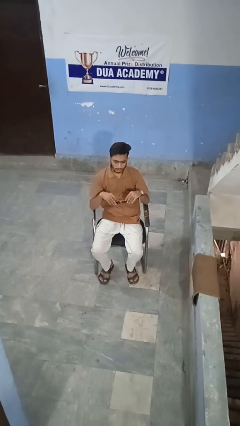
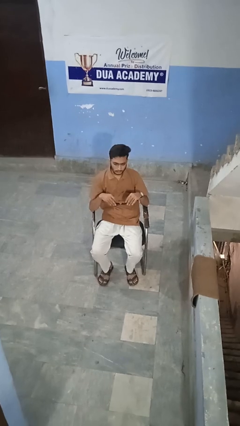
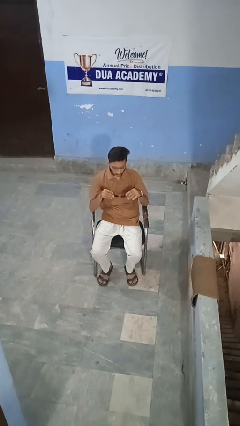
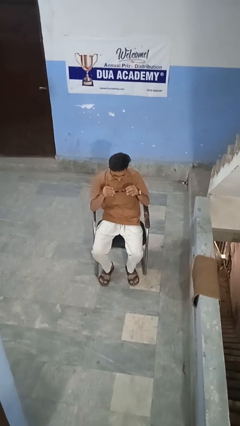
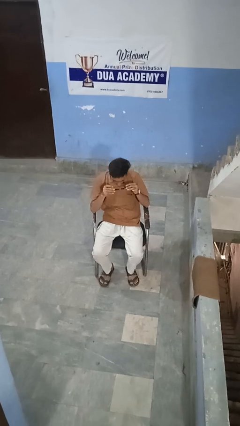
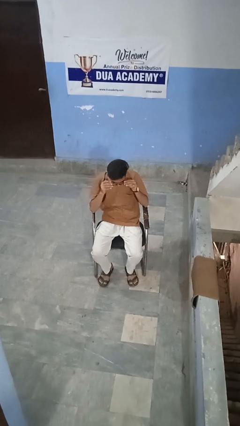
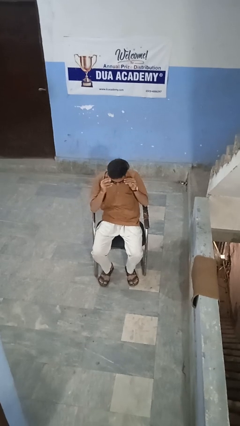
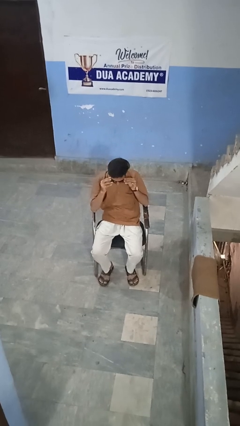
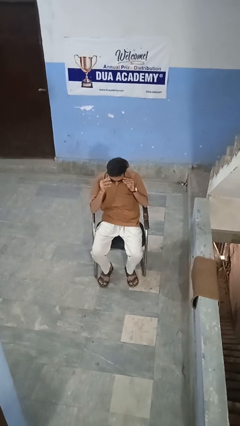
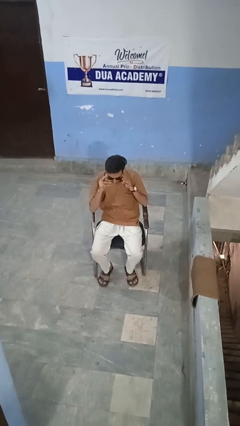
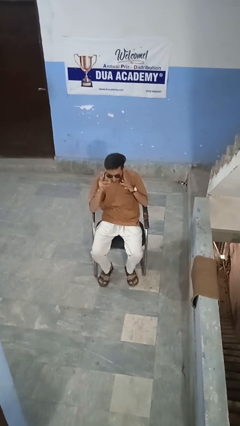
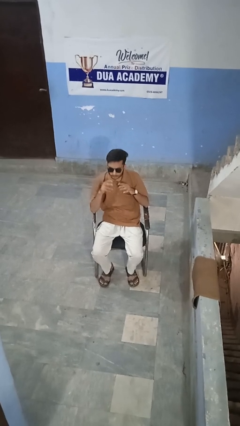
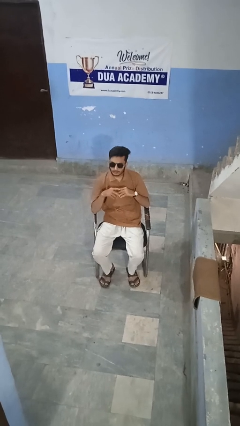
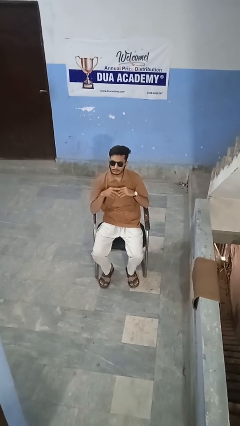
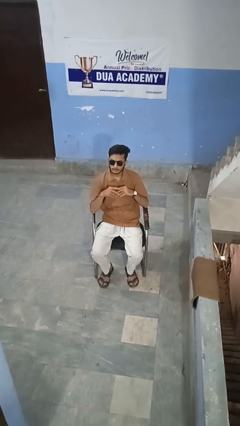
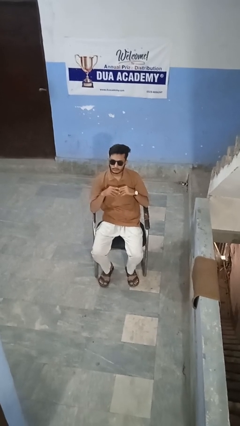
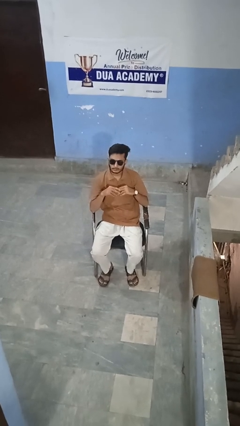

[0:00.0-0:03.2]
person puts on sunglasses

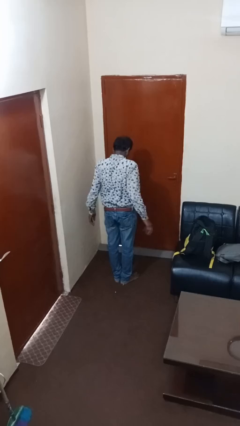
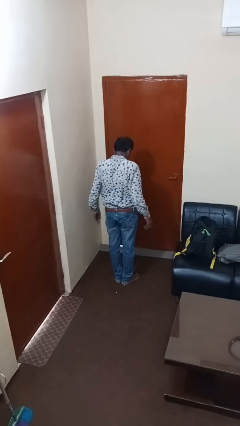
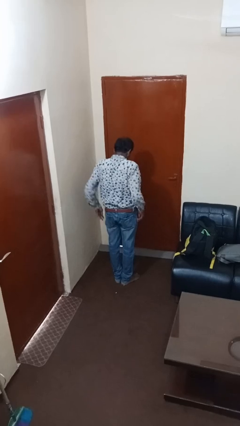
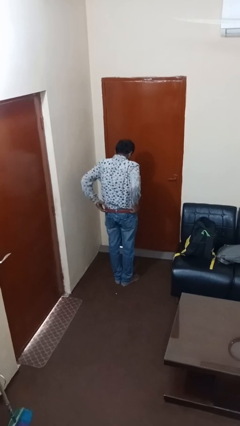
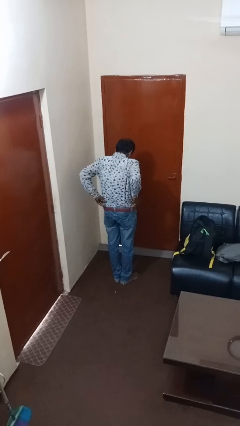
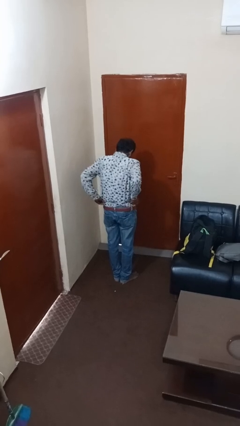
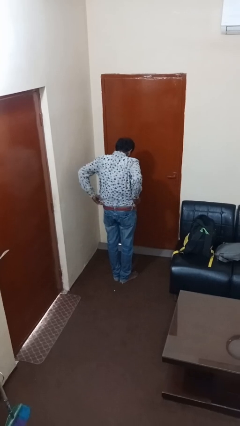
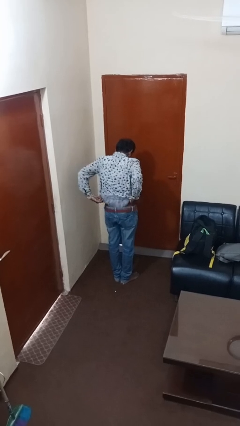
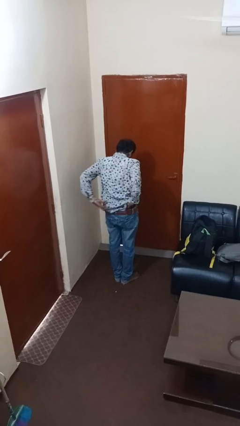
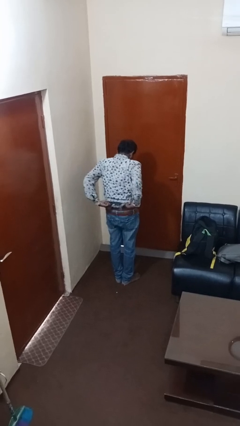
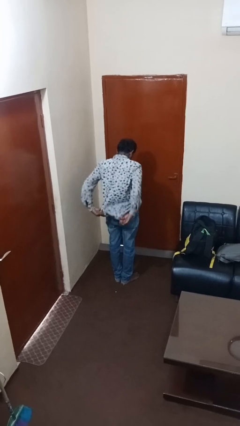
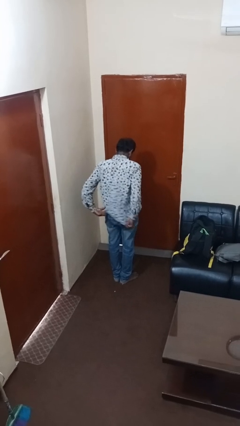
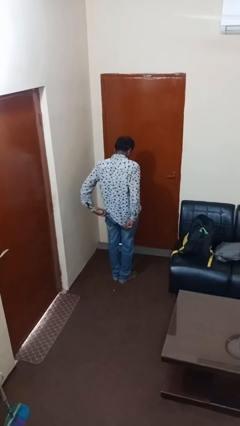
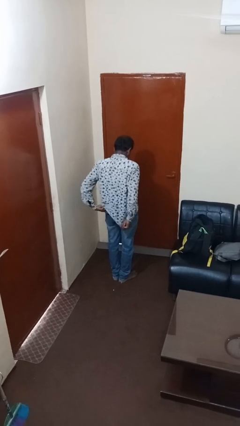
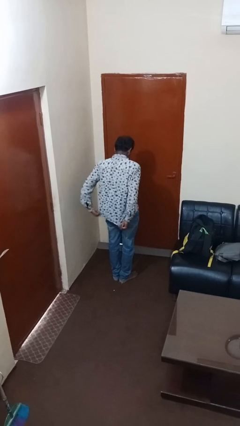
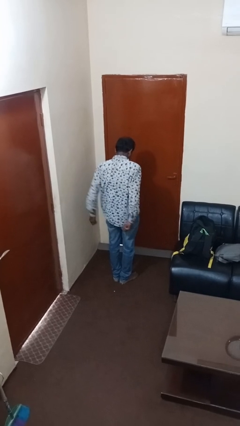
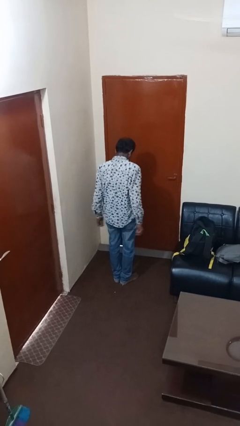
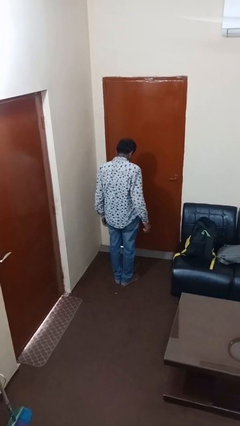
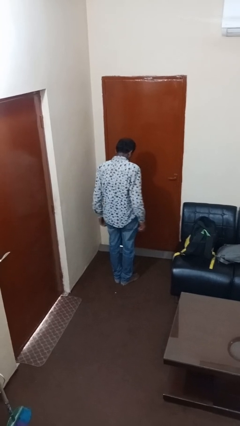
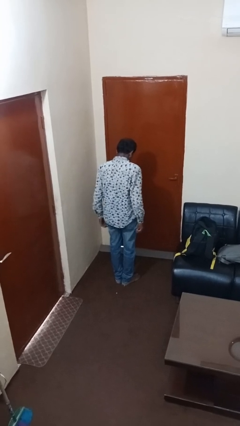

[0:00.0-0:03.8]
person untucks shirt

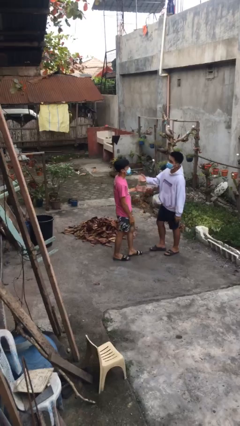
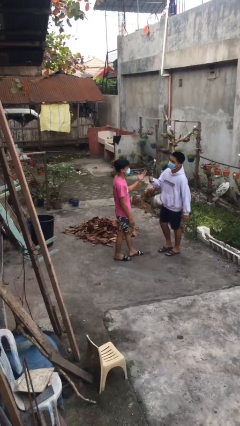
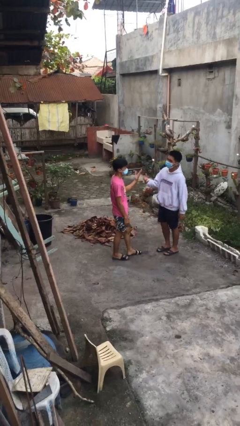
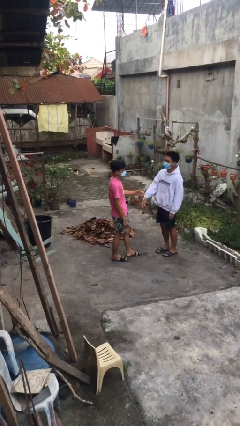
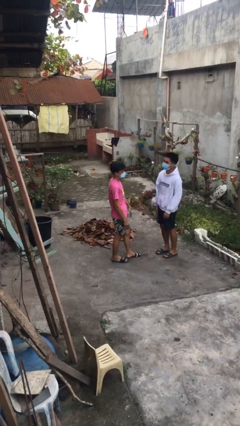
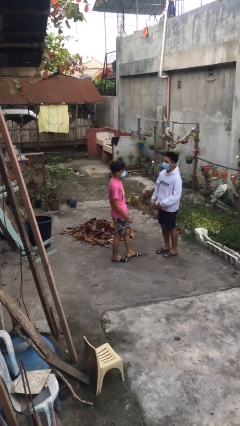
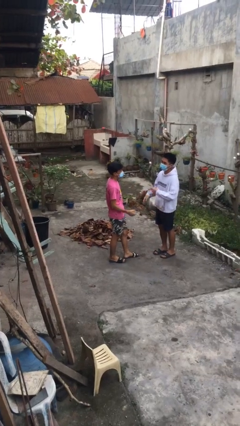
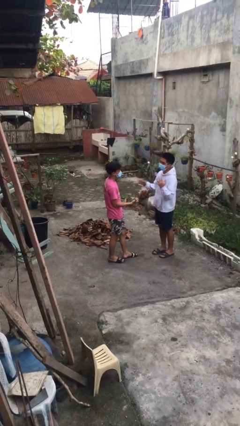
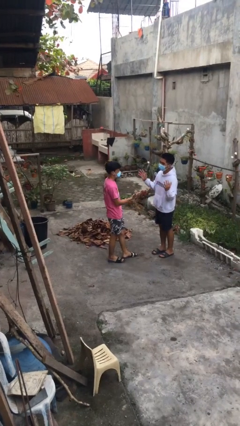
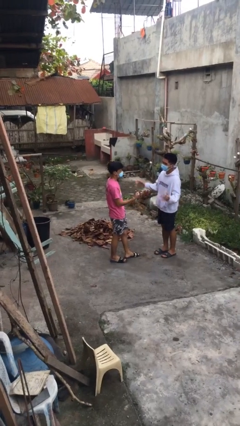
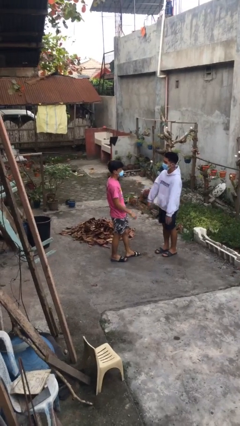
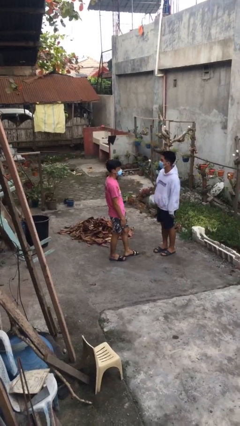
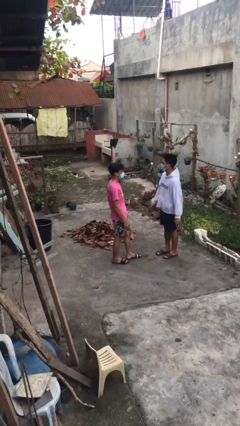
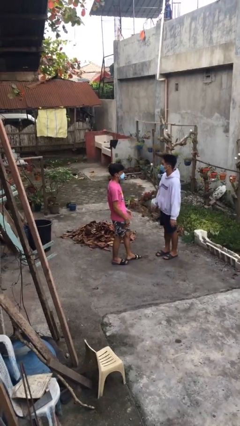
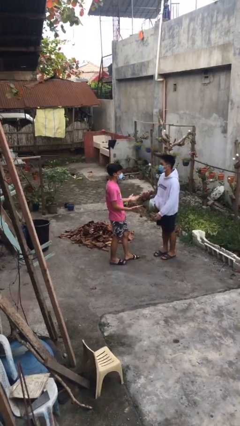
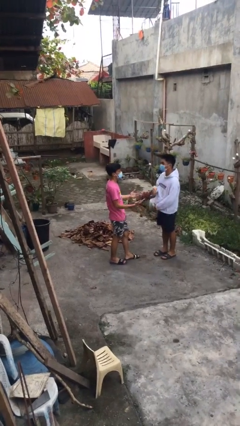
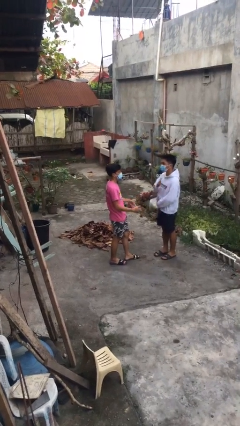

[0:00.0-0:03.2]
person talks to person

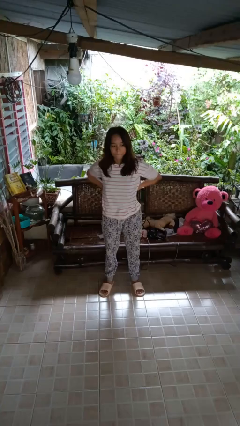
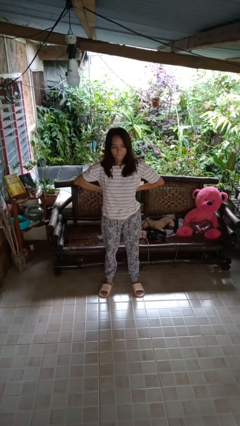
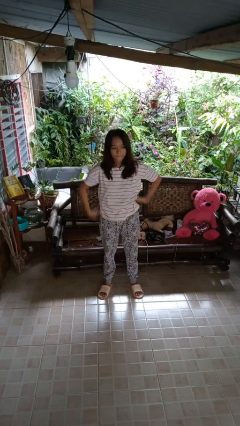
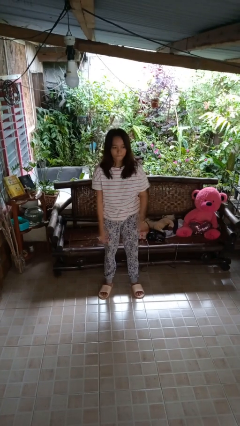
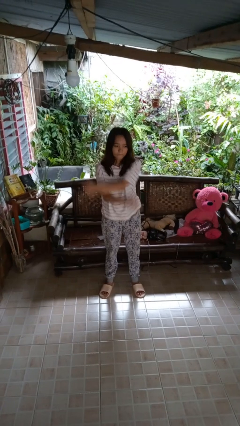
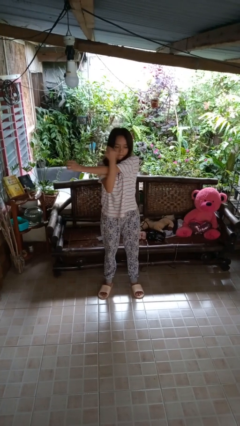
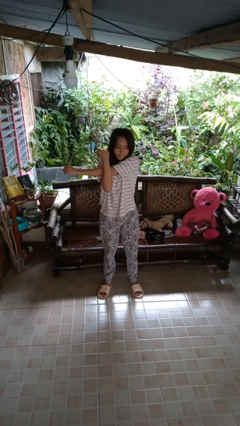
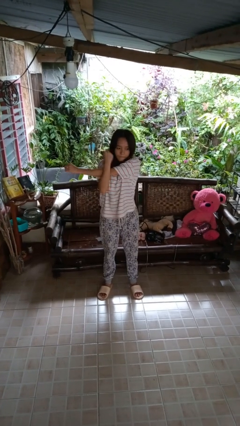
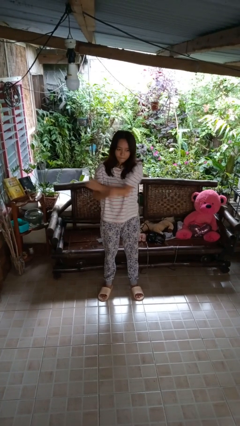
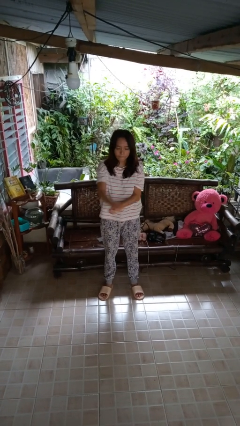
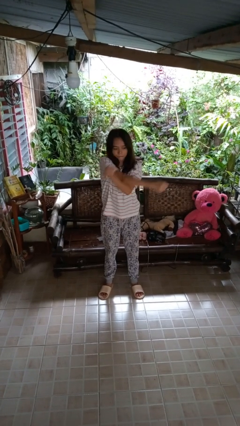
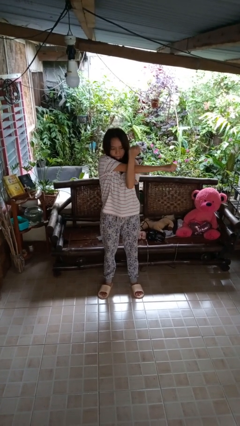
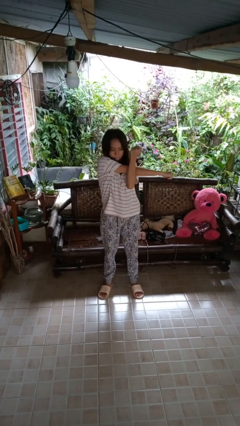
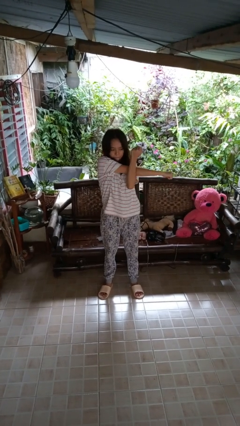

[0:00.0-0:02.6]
person stretches arms to side

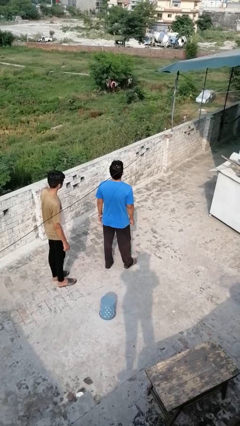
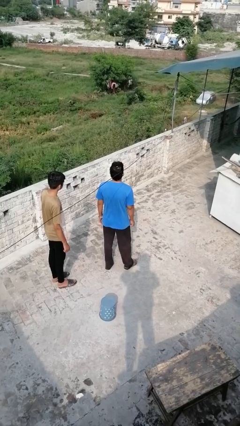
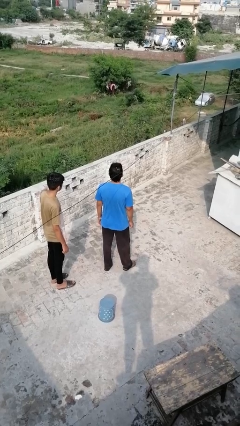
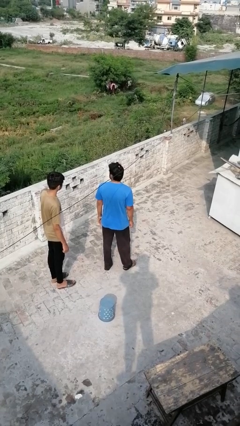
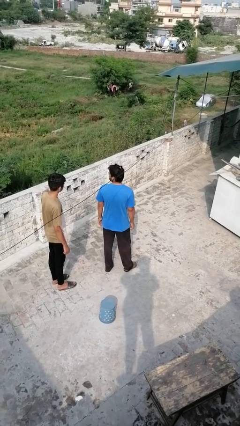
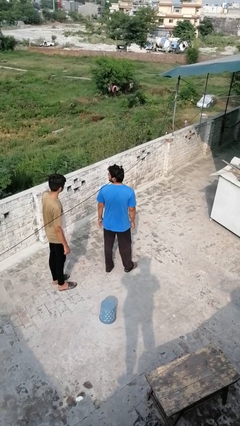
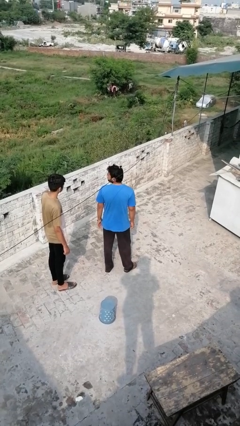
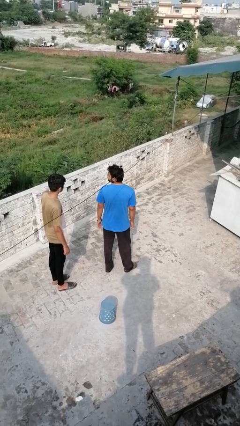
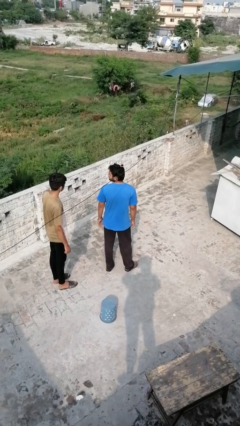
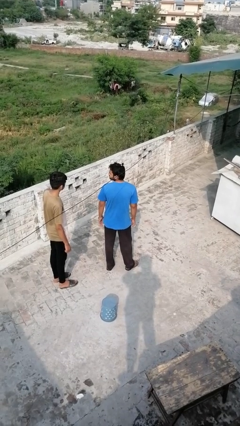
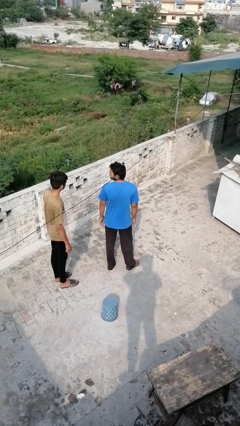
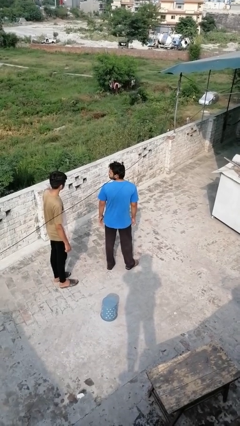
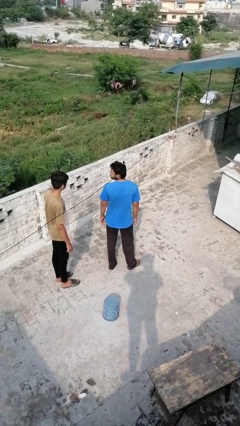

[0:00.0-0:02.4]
person looks over shoulder

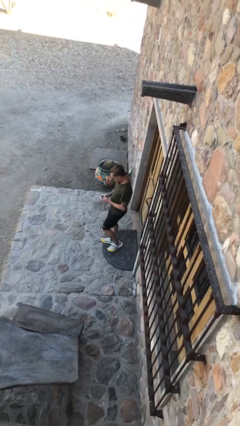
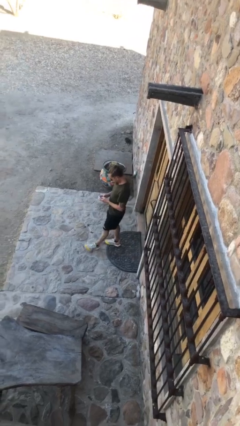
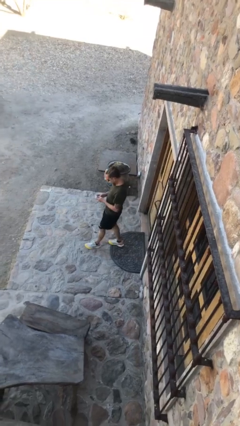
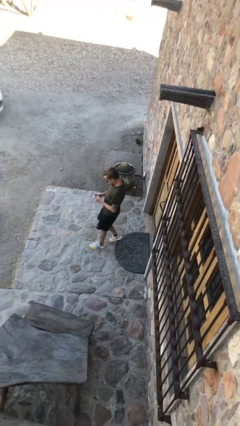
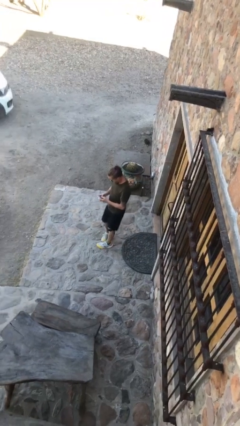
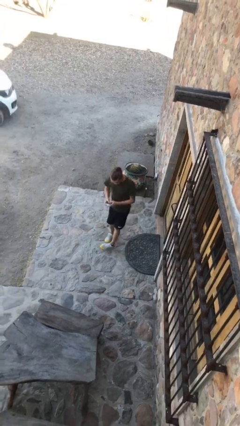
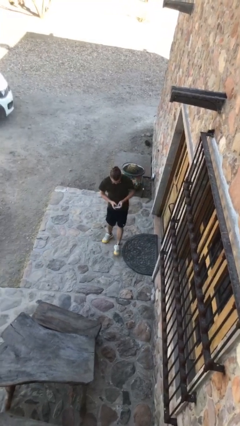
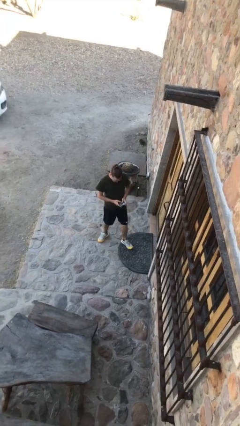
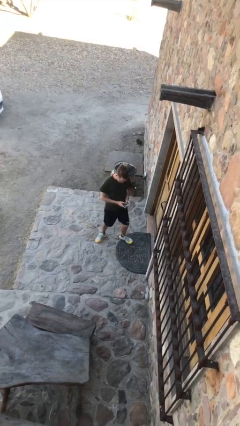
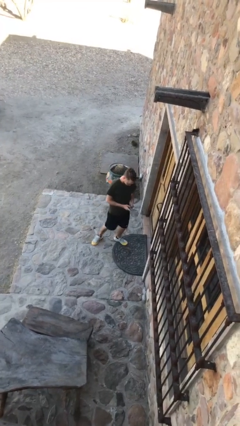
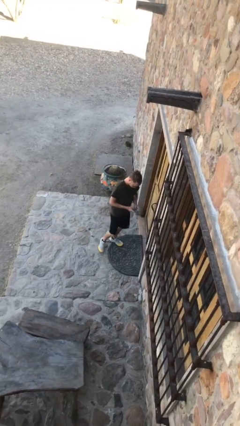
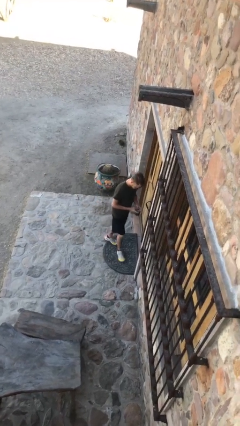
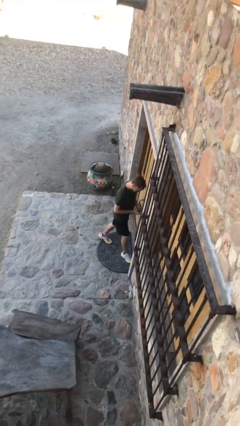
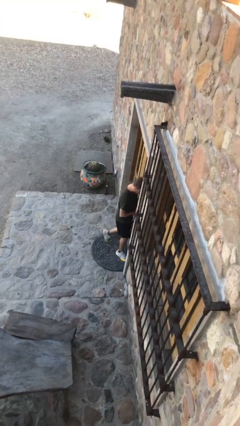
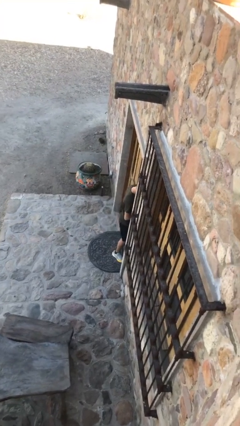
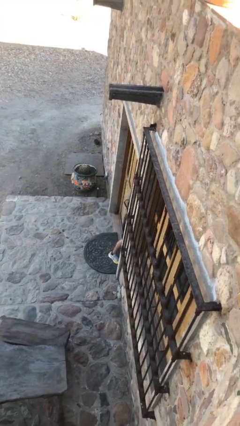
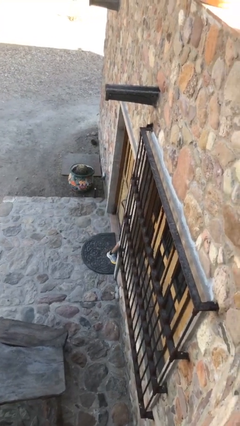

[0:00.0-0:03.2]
person exits scene through structure
